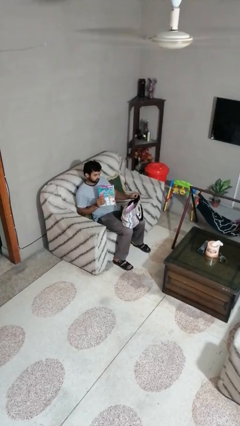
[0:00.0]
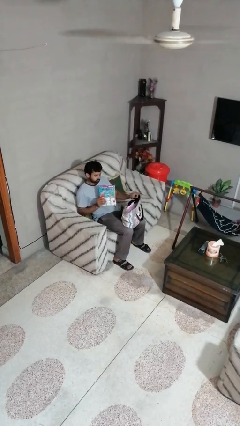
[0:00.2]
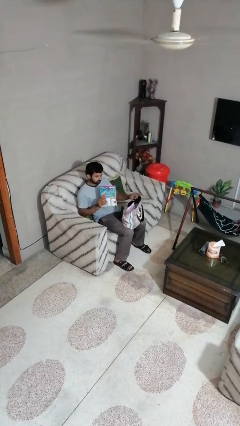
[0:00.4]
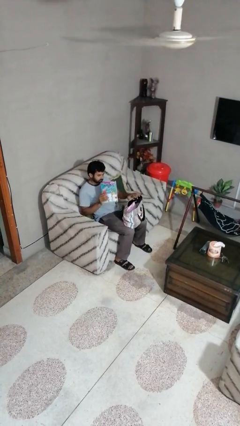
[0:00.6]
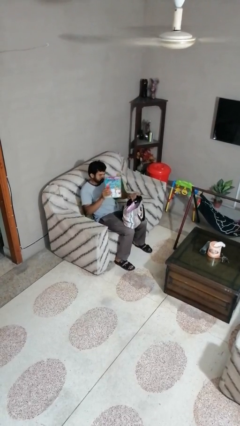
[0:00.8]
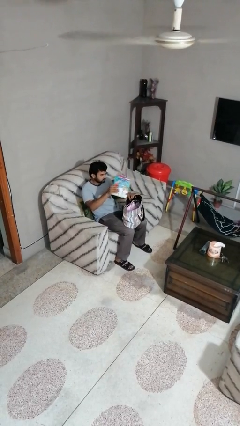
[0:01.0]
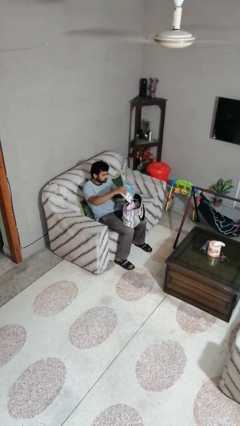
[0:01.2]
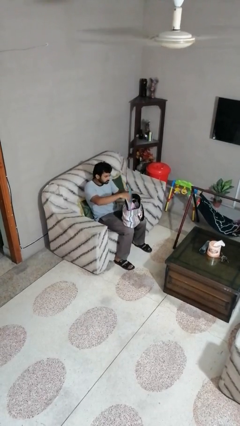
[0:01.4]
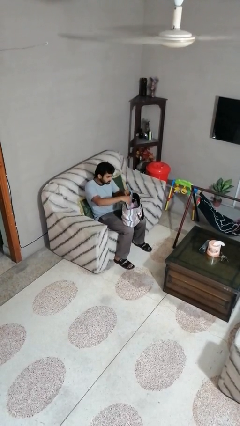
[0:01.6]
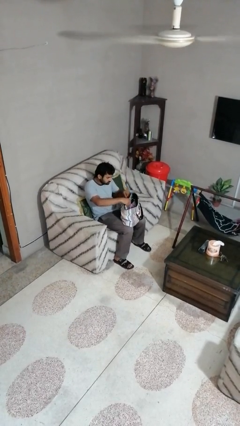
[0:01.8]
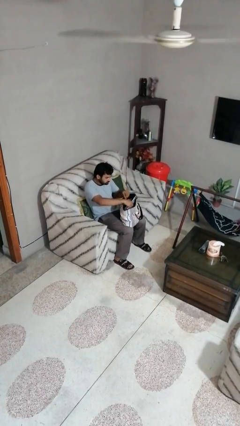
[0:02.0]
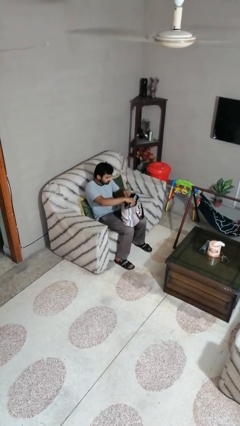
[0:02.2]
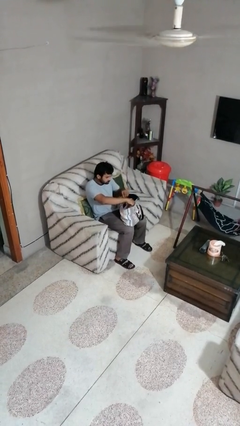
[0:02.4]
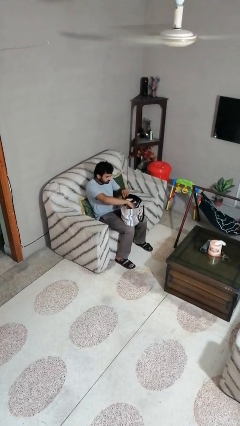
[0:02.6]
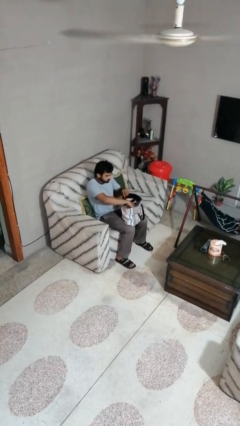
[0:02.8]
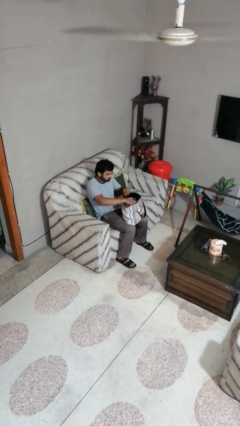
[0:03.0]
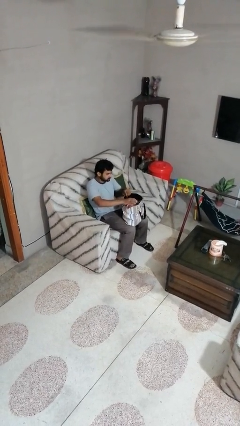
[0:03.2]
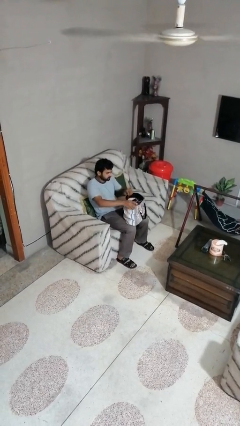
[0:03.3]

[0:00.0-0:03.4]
person puts object into backpack

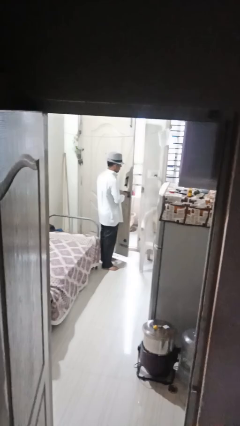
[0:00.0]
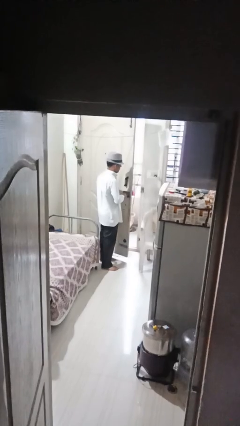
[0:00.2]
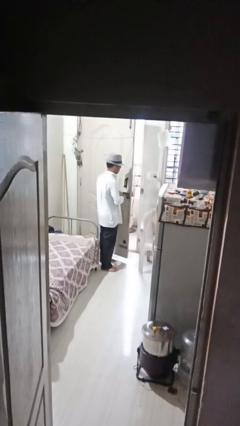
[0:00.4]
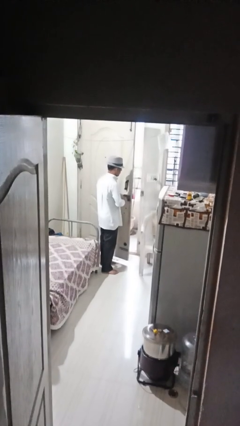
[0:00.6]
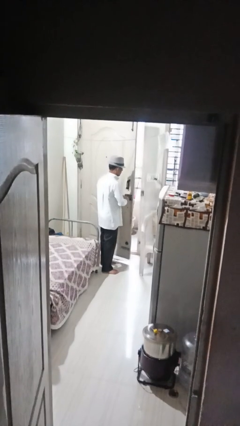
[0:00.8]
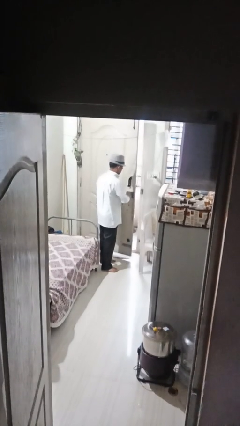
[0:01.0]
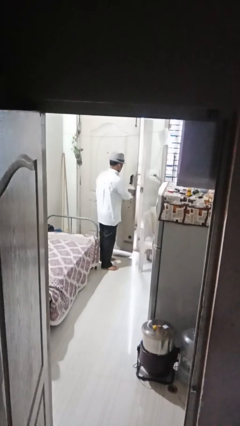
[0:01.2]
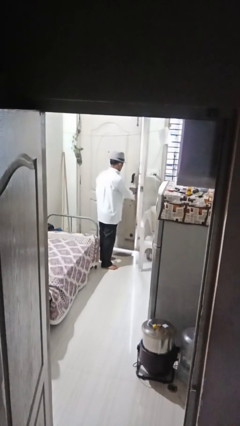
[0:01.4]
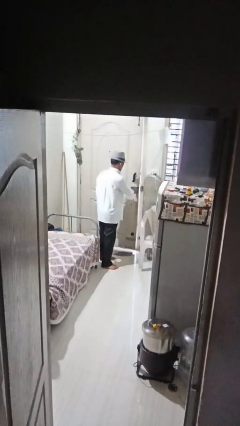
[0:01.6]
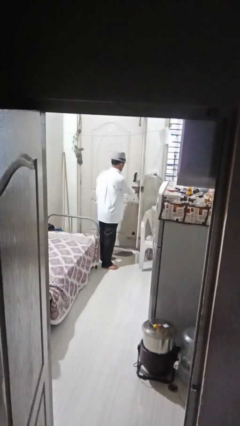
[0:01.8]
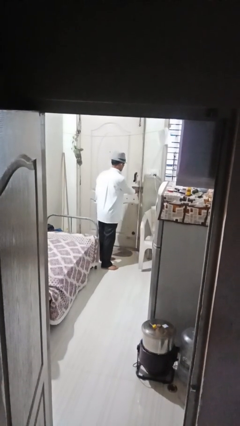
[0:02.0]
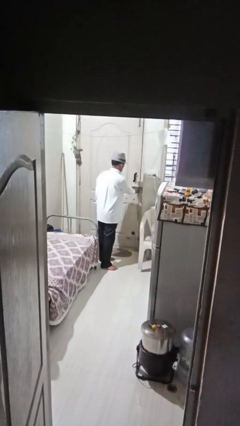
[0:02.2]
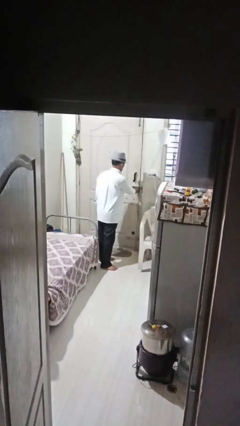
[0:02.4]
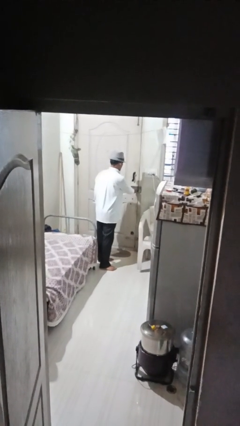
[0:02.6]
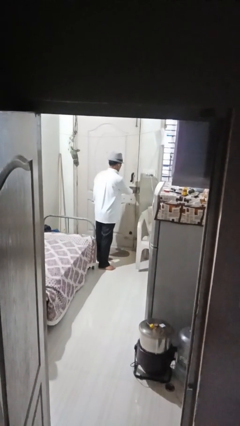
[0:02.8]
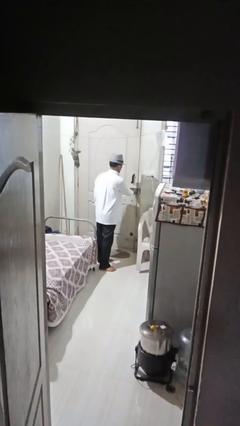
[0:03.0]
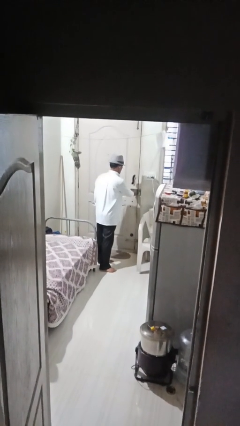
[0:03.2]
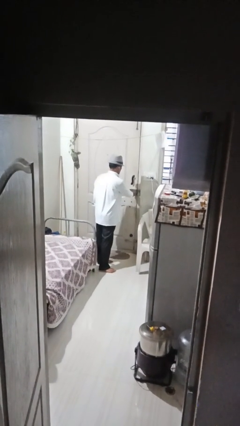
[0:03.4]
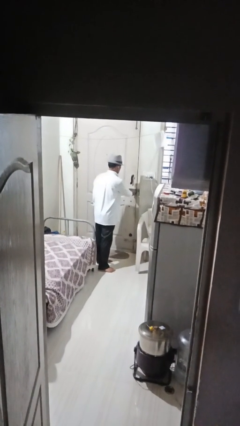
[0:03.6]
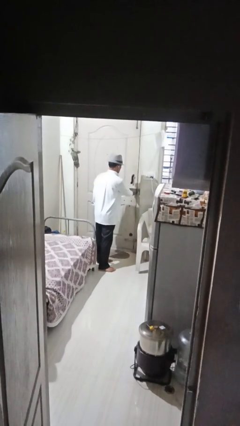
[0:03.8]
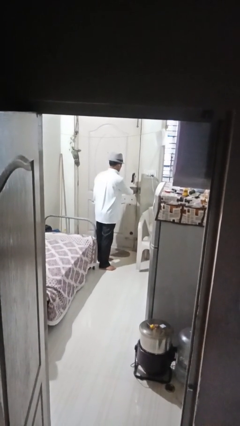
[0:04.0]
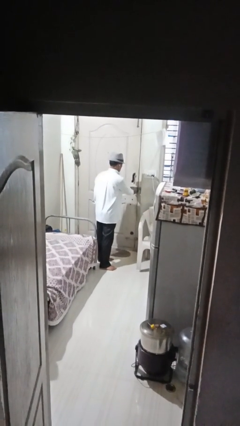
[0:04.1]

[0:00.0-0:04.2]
person closes facility door

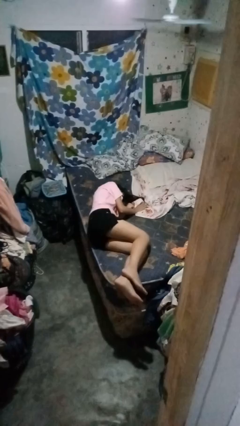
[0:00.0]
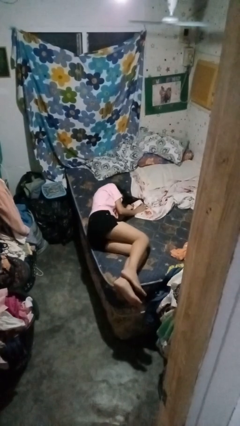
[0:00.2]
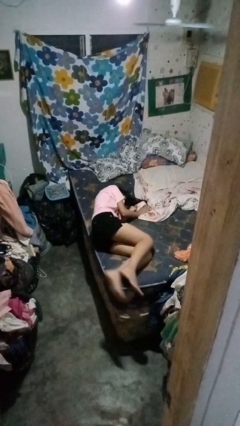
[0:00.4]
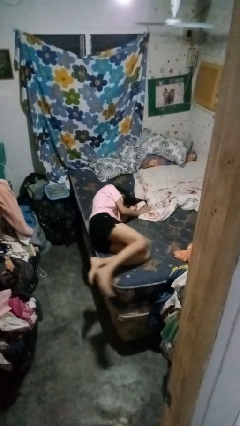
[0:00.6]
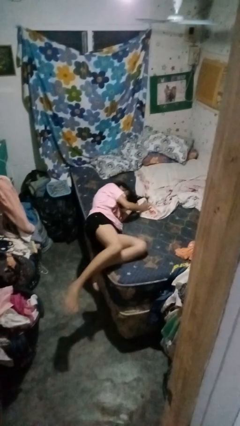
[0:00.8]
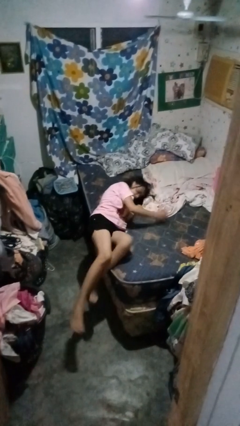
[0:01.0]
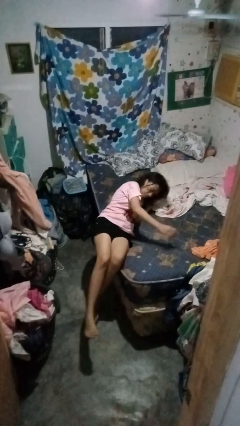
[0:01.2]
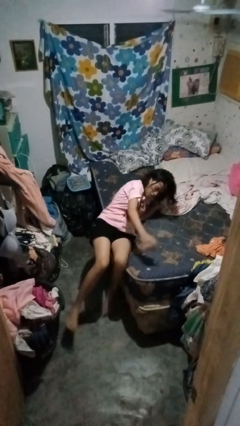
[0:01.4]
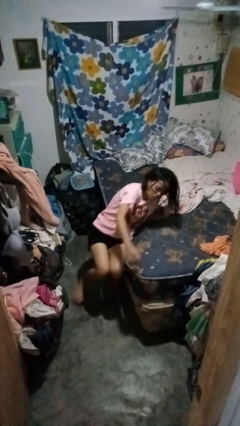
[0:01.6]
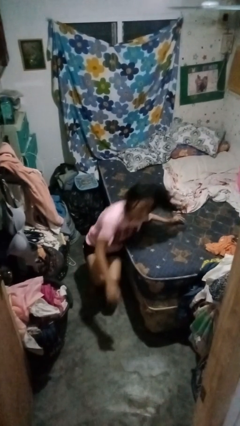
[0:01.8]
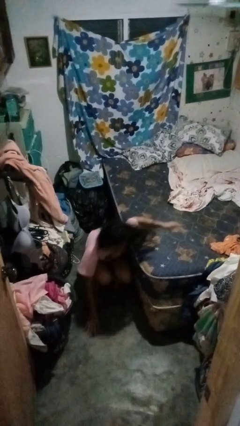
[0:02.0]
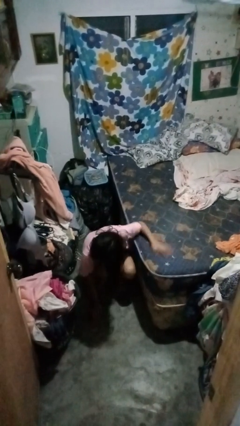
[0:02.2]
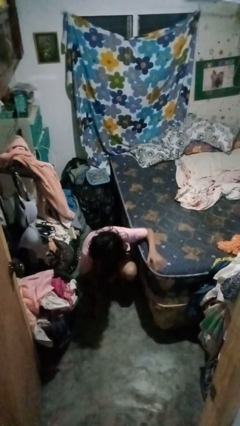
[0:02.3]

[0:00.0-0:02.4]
person falls from bed

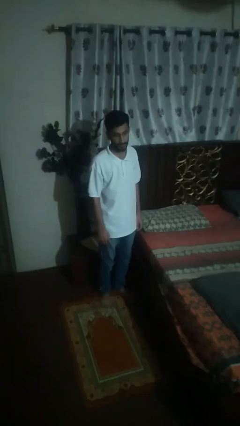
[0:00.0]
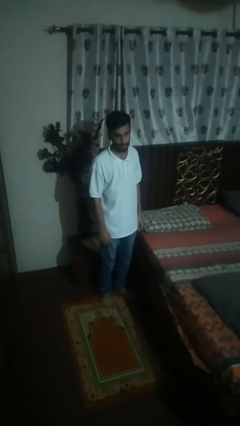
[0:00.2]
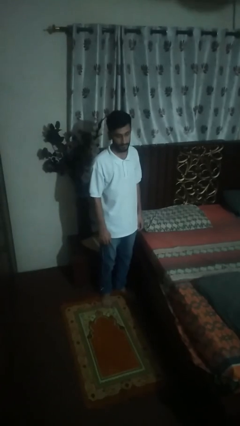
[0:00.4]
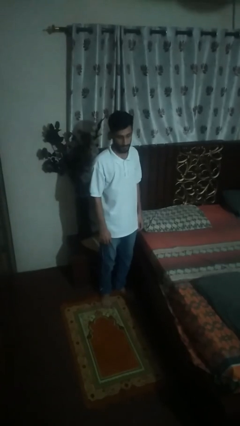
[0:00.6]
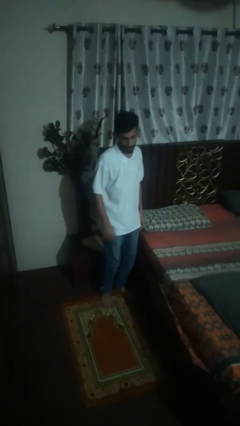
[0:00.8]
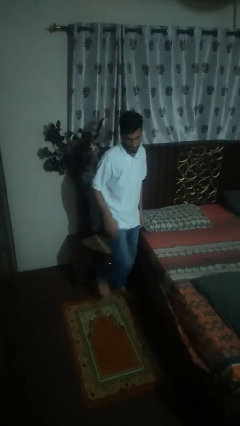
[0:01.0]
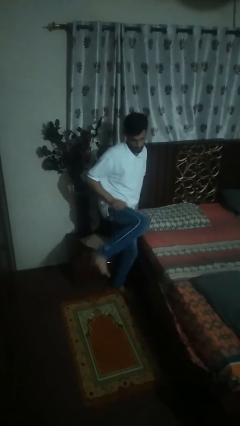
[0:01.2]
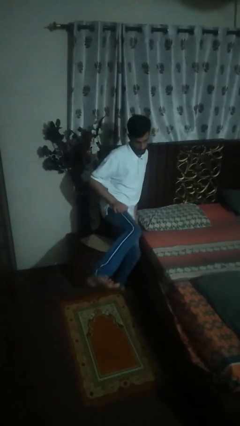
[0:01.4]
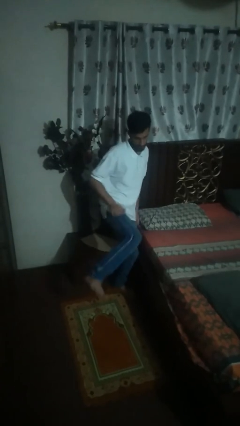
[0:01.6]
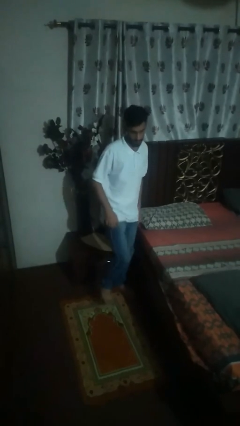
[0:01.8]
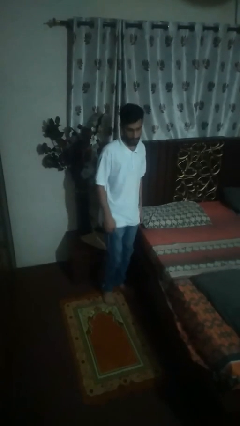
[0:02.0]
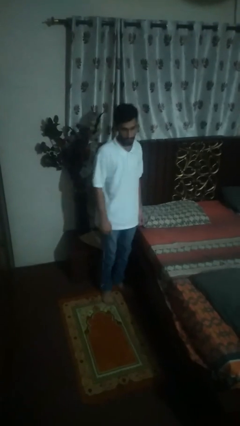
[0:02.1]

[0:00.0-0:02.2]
person karate kicks

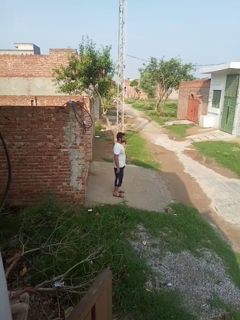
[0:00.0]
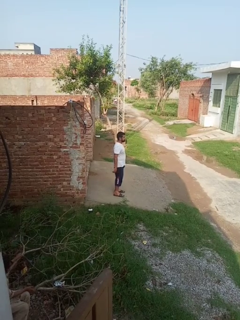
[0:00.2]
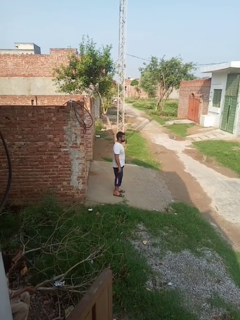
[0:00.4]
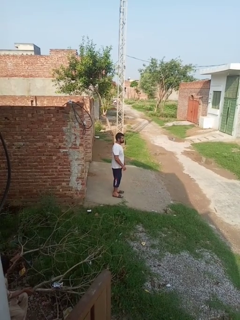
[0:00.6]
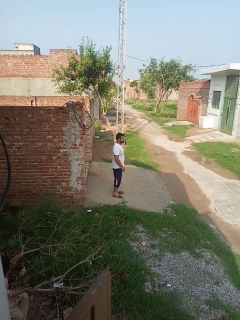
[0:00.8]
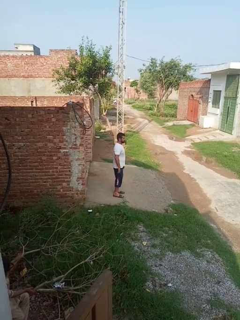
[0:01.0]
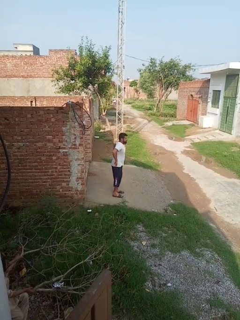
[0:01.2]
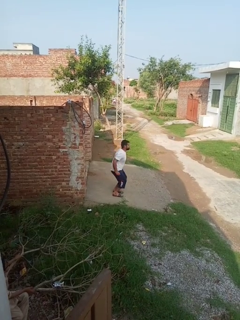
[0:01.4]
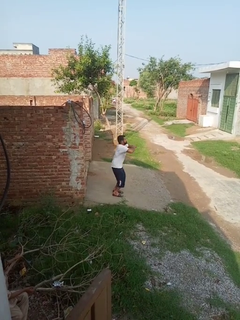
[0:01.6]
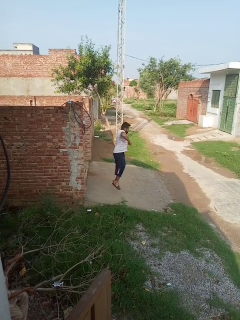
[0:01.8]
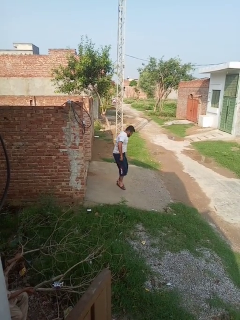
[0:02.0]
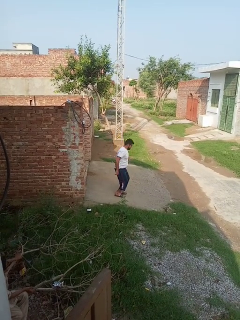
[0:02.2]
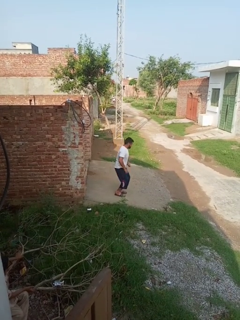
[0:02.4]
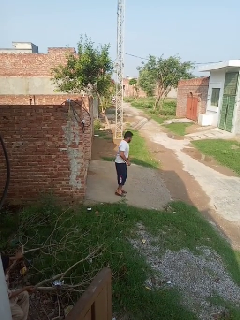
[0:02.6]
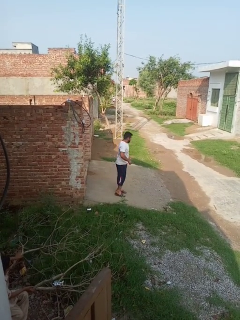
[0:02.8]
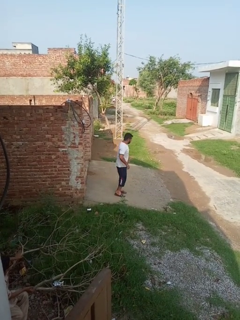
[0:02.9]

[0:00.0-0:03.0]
person jumps

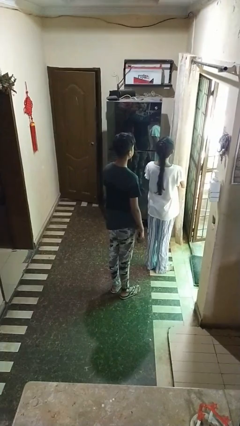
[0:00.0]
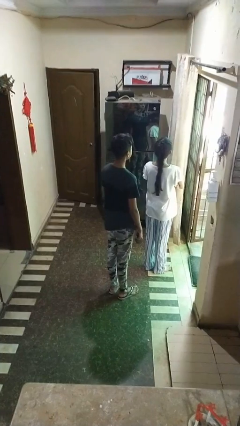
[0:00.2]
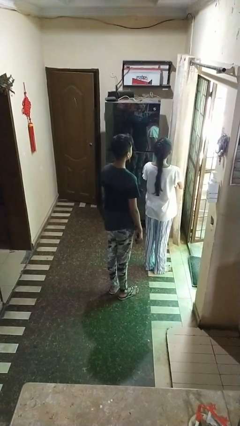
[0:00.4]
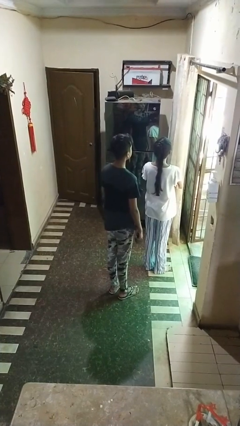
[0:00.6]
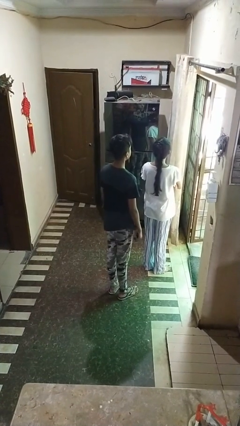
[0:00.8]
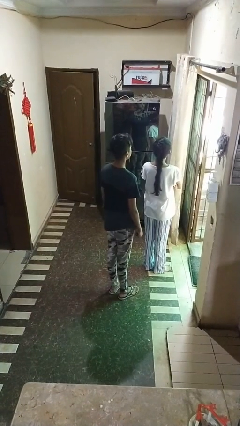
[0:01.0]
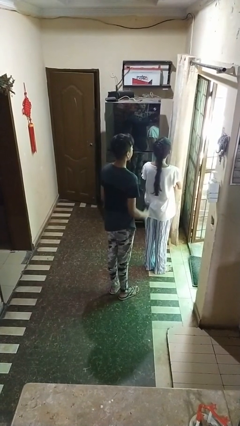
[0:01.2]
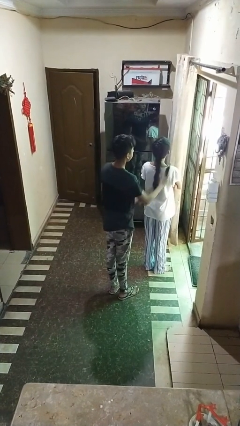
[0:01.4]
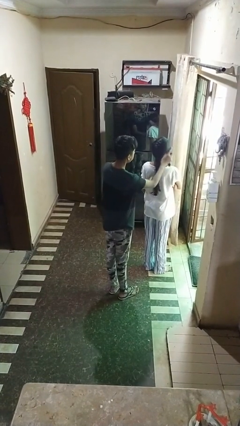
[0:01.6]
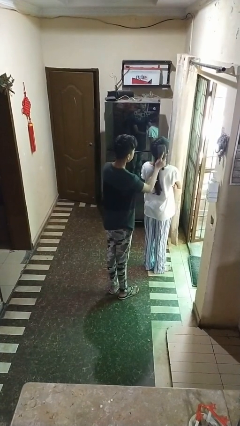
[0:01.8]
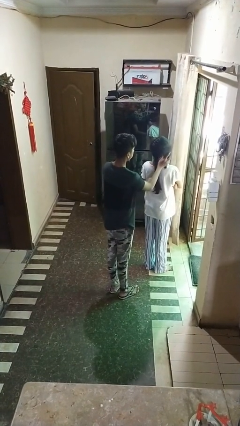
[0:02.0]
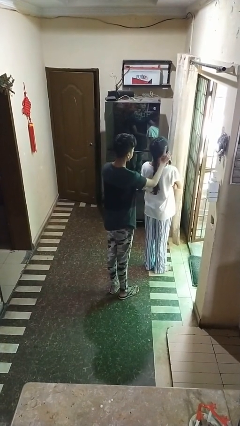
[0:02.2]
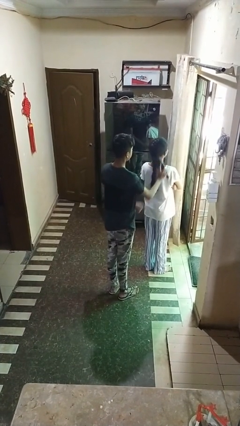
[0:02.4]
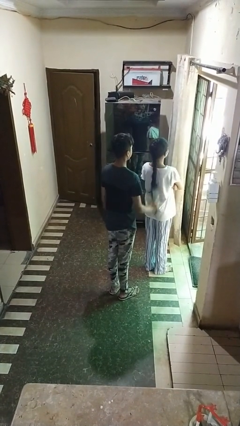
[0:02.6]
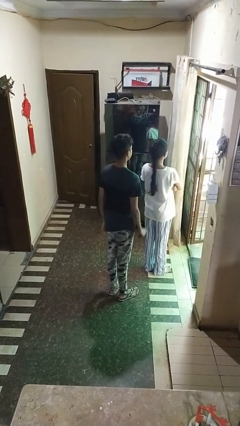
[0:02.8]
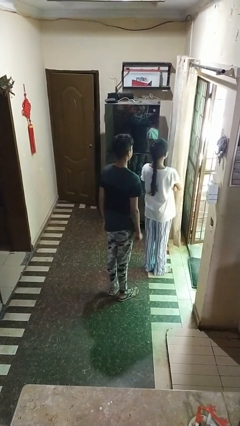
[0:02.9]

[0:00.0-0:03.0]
person brushes hair of person
